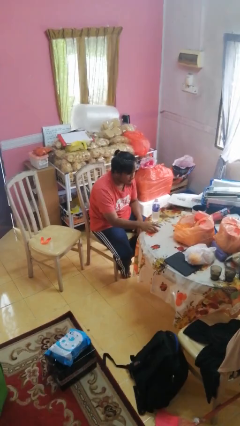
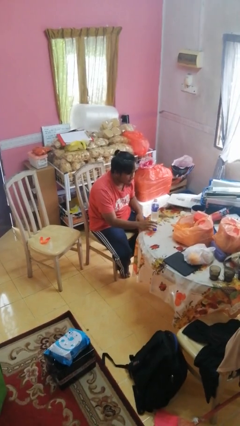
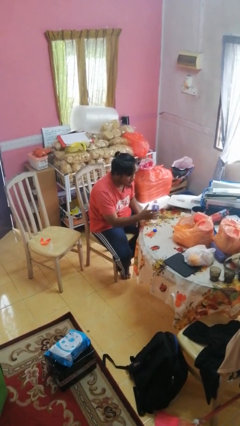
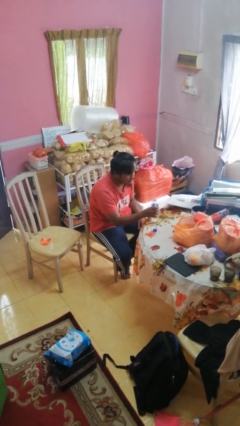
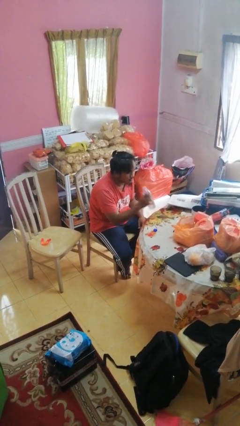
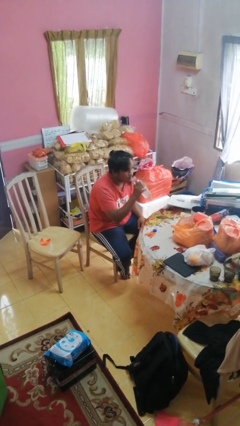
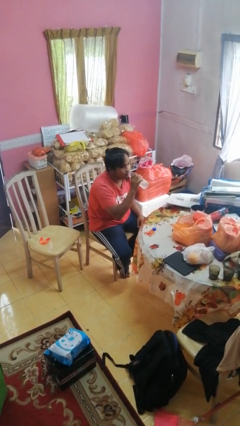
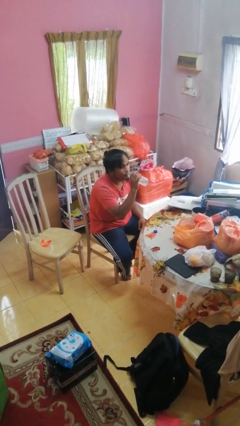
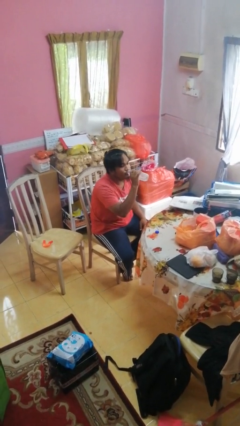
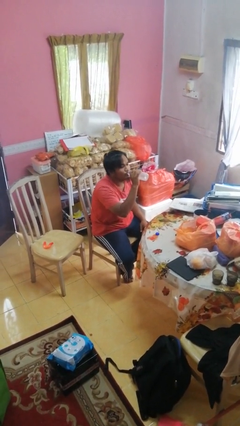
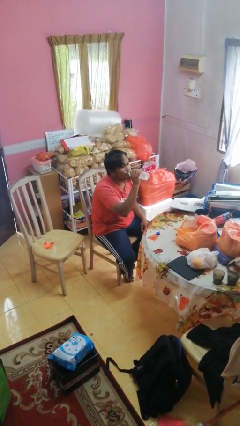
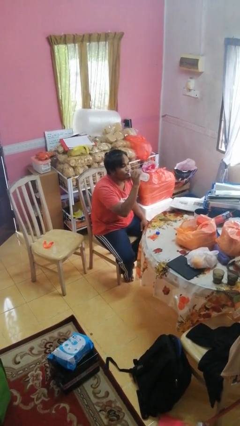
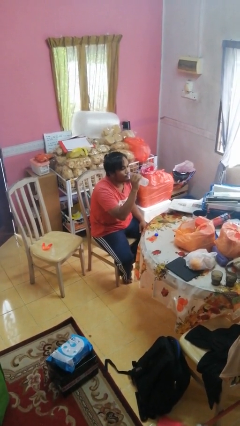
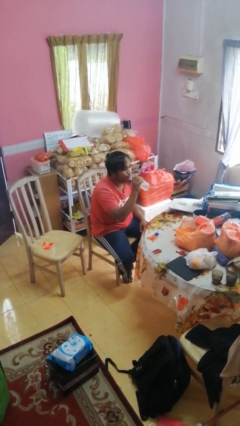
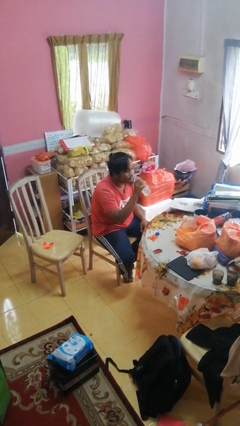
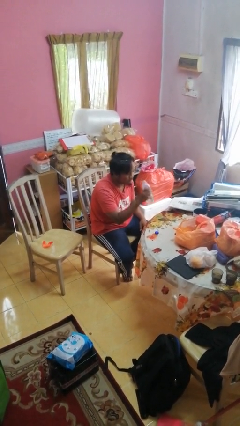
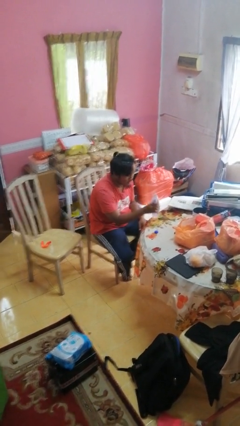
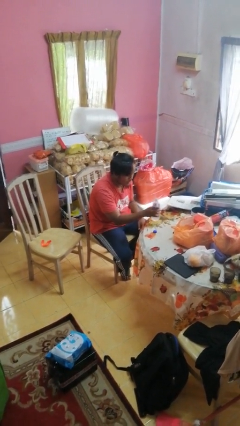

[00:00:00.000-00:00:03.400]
person drinks from bottle

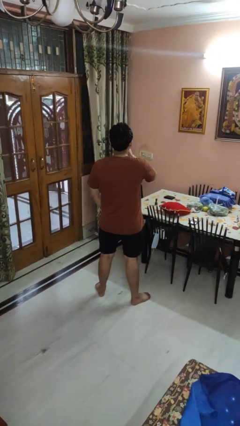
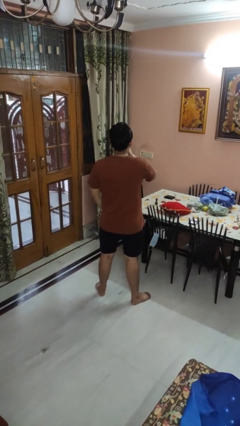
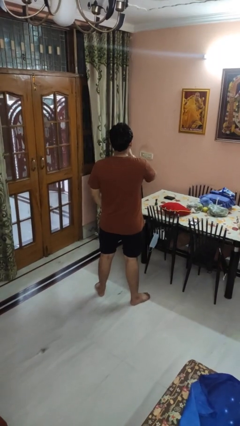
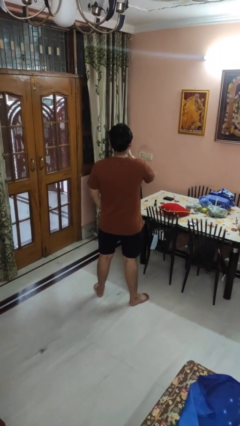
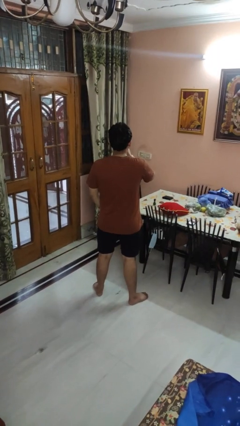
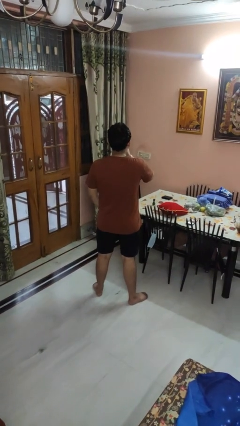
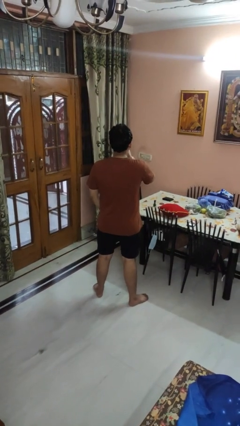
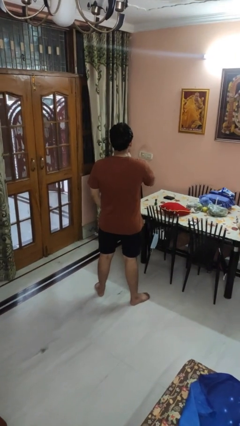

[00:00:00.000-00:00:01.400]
person gestures be quiet

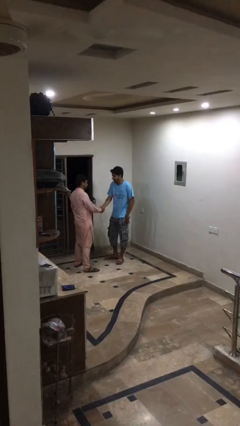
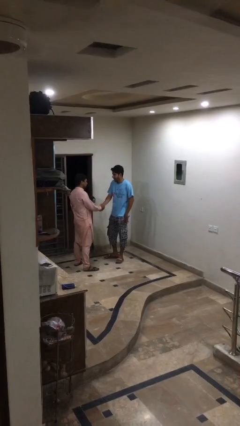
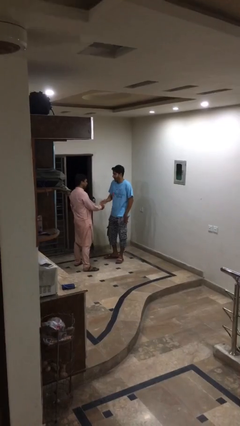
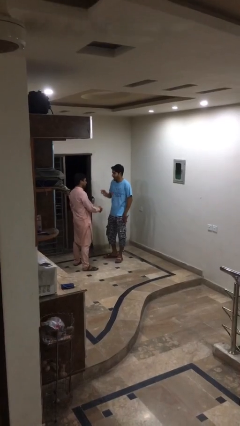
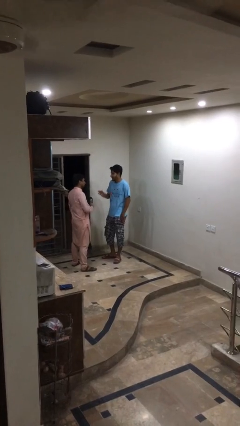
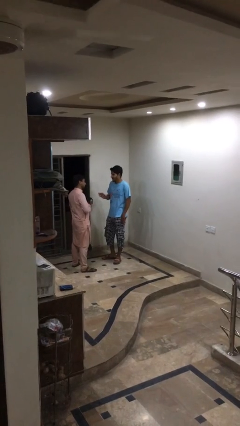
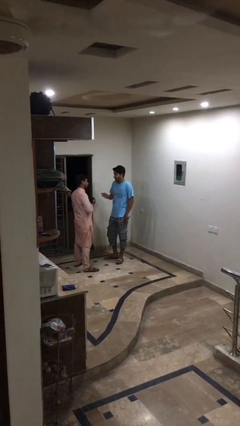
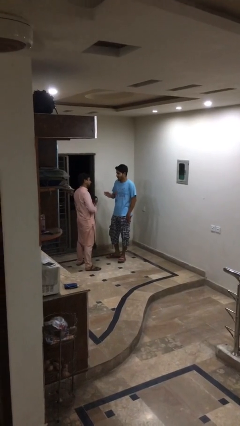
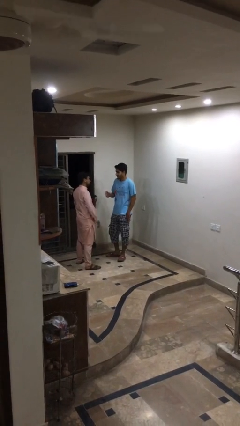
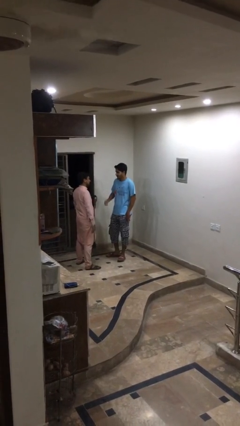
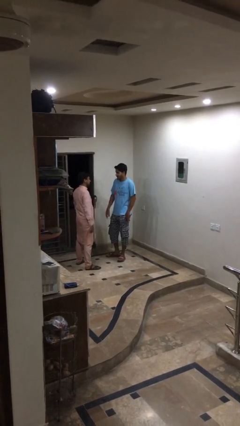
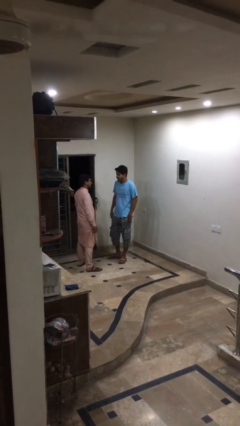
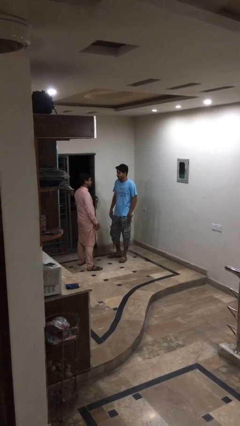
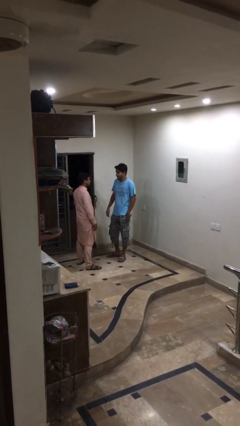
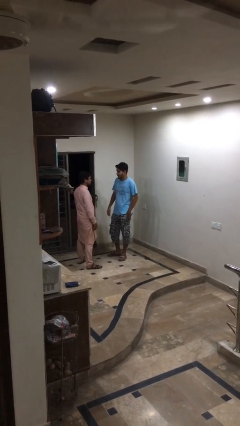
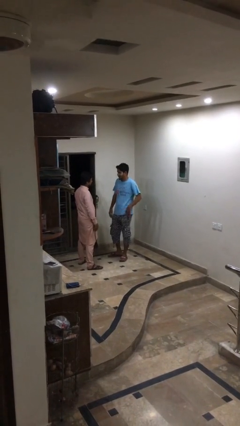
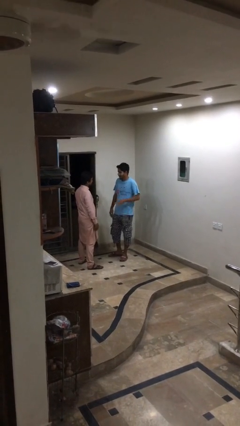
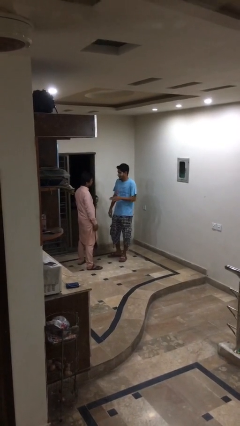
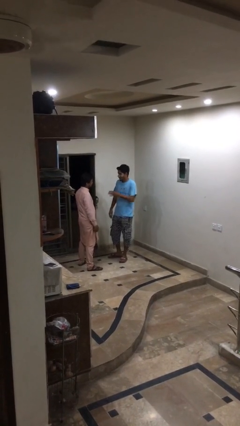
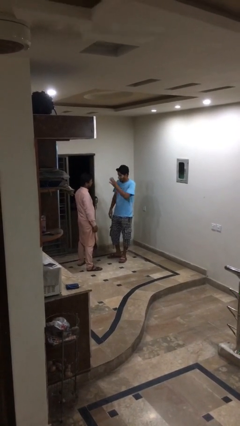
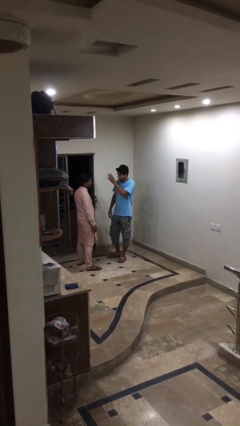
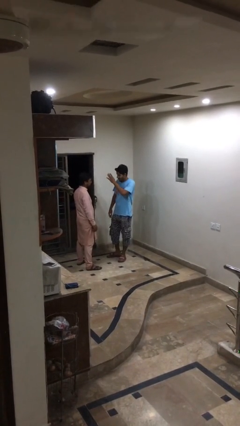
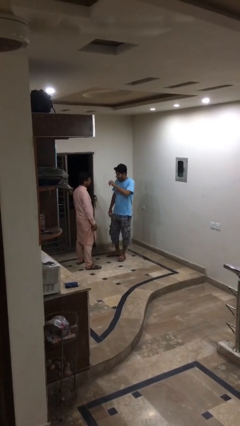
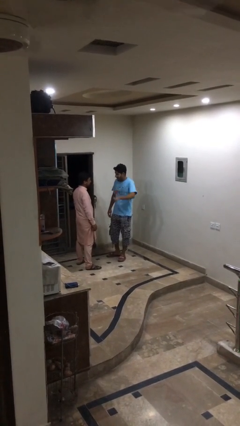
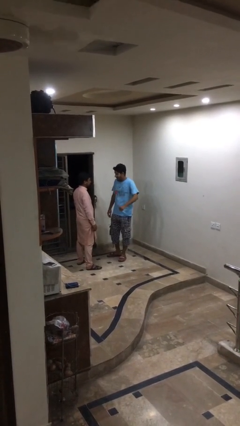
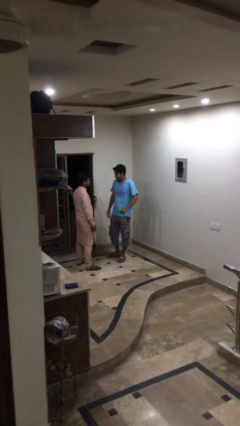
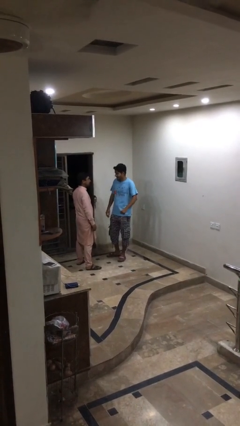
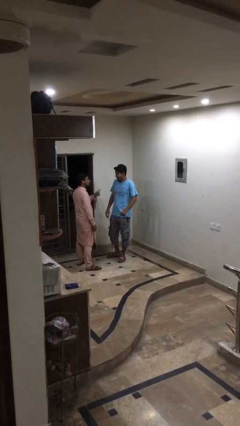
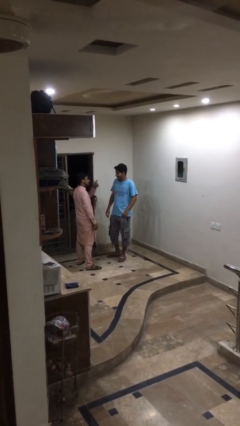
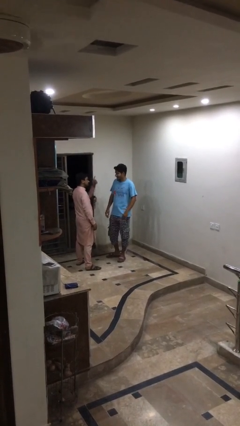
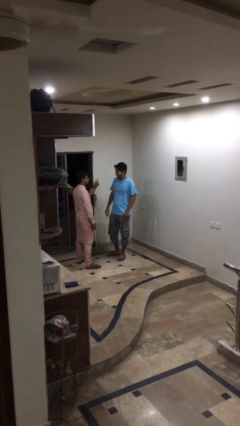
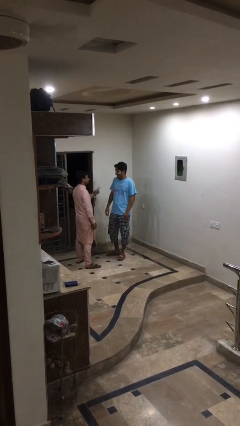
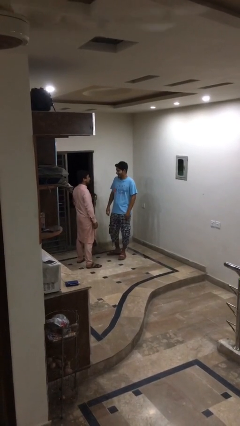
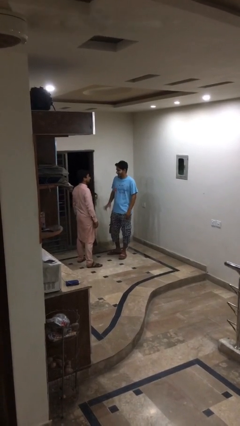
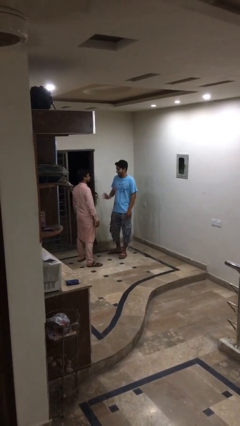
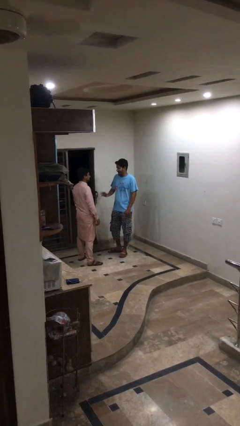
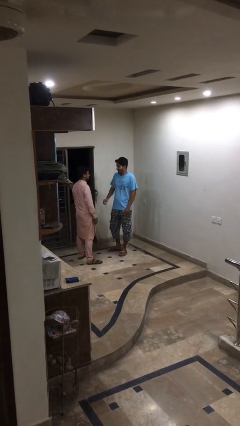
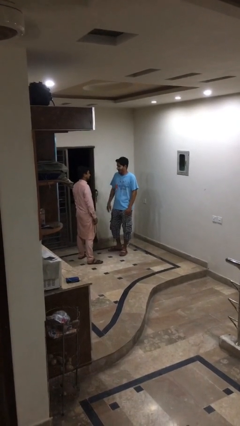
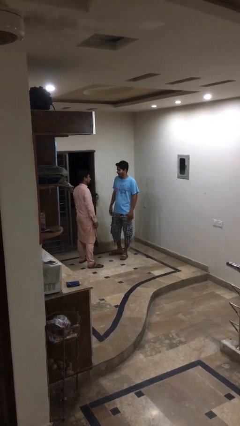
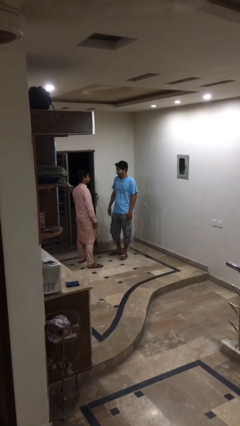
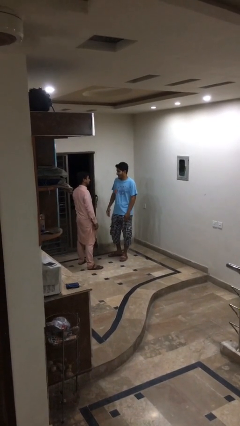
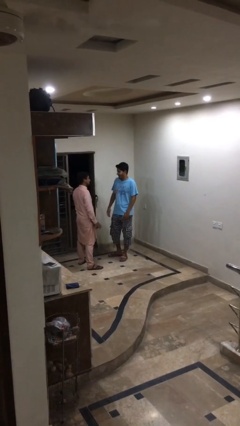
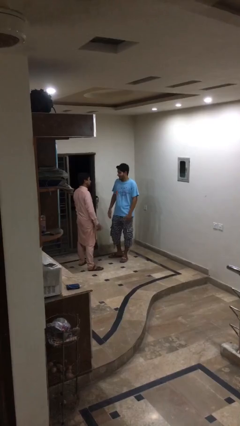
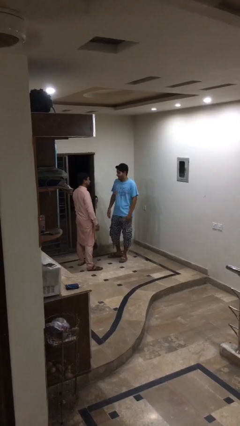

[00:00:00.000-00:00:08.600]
person talks to person

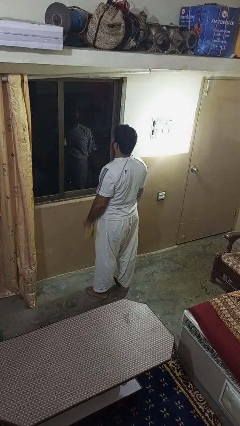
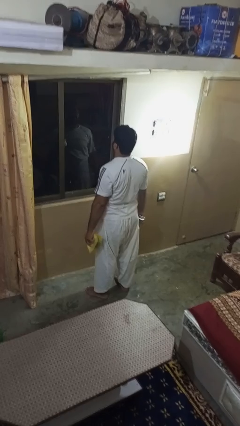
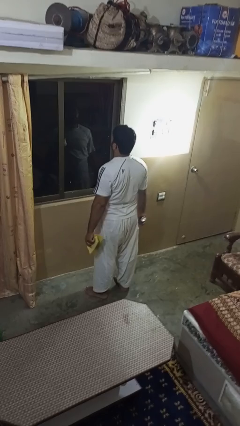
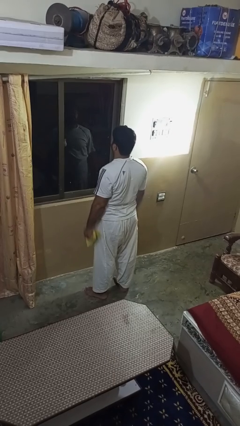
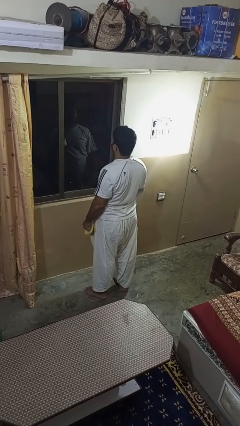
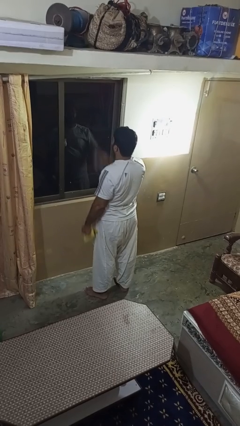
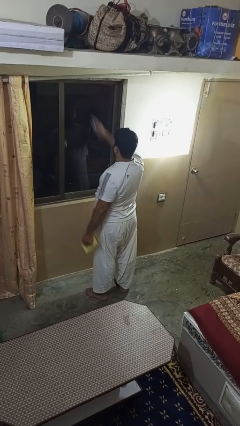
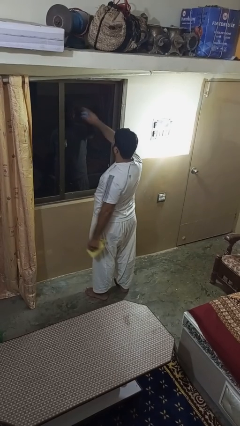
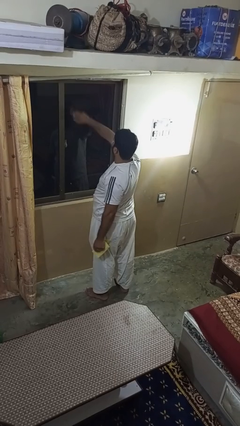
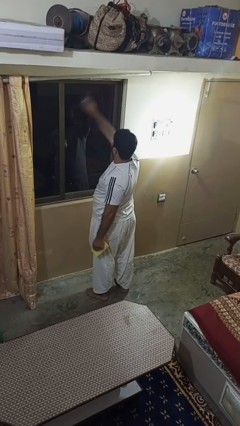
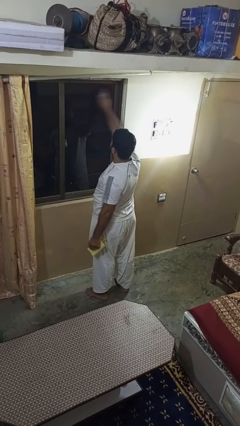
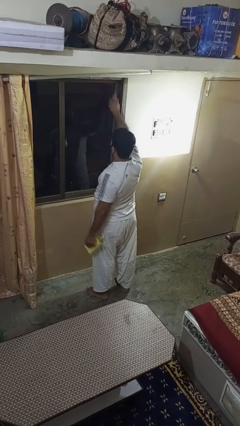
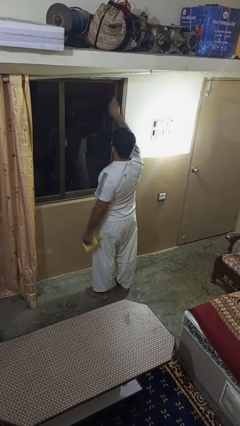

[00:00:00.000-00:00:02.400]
person sprays from bottle

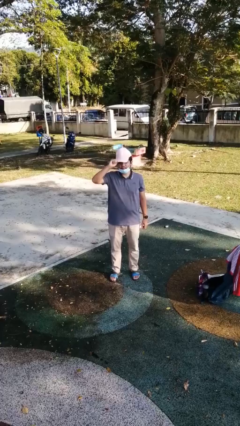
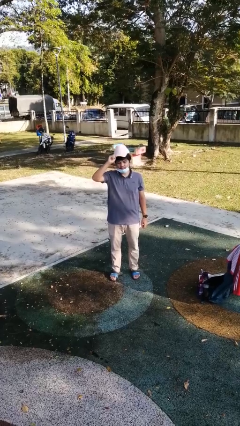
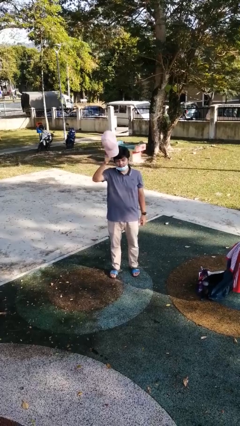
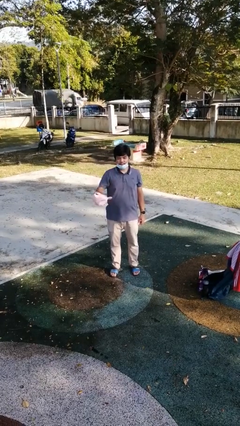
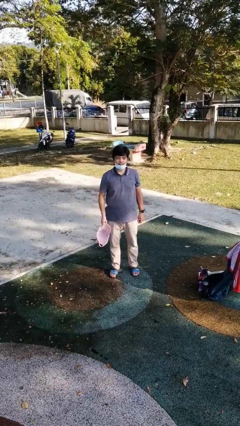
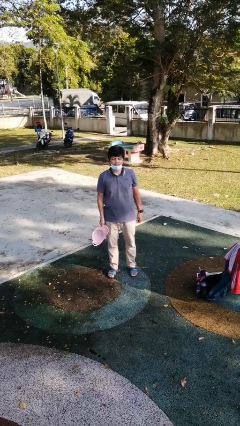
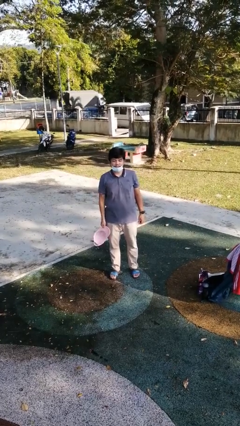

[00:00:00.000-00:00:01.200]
person takes off hat

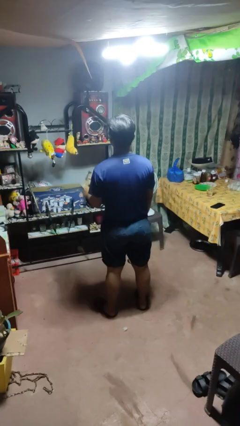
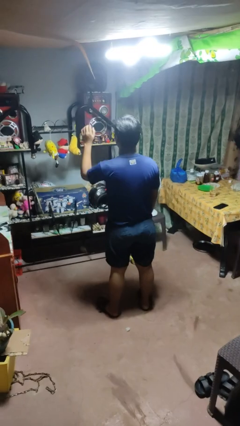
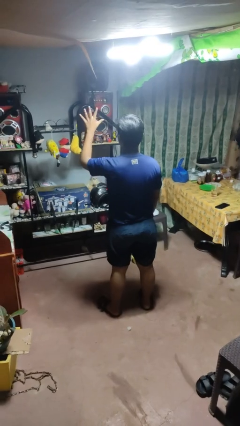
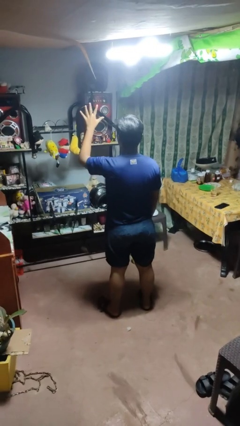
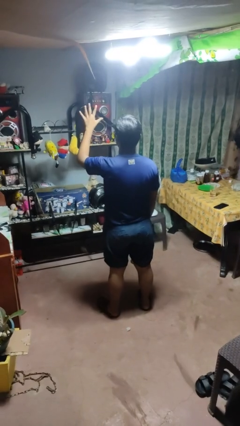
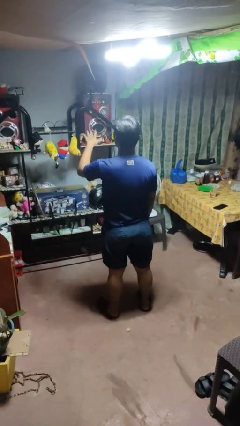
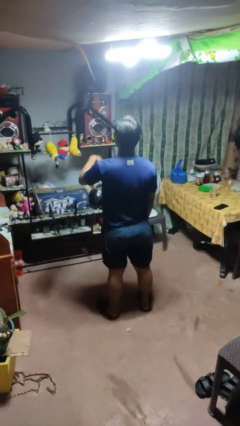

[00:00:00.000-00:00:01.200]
person gestures number five
